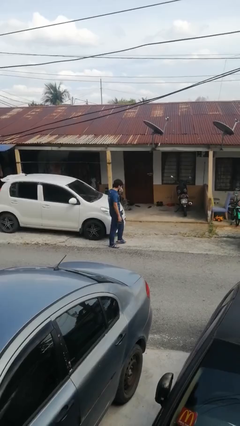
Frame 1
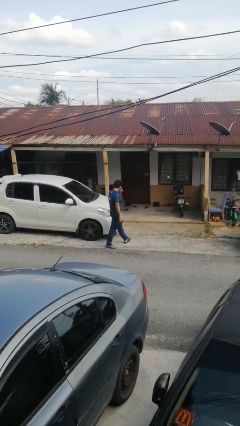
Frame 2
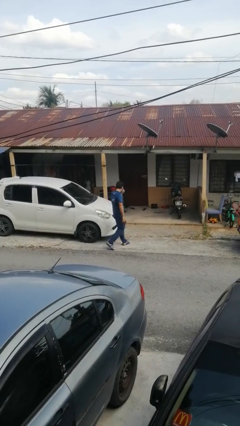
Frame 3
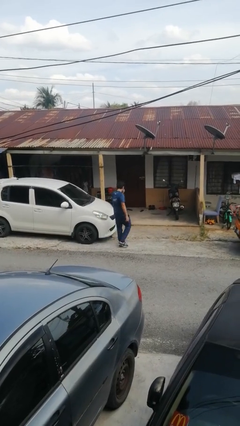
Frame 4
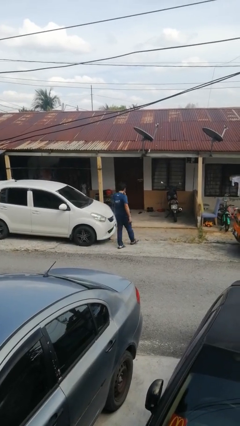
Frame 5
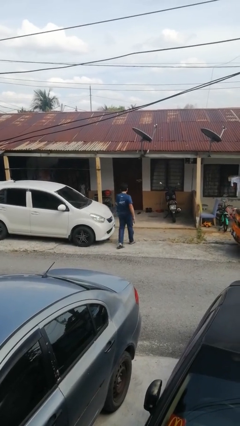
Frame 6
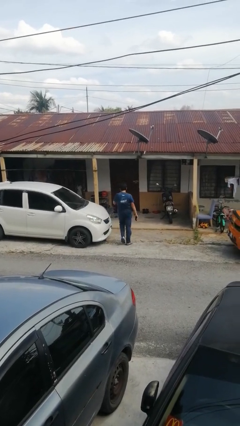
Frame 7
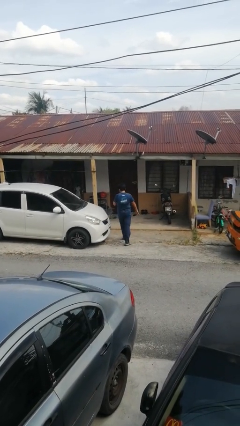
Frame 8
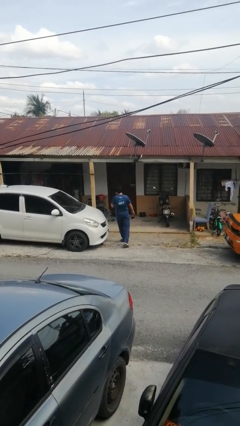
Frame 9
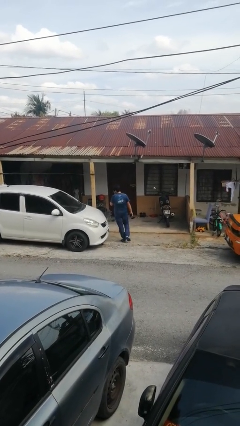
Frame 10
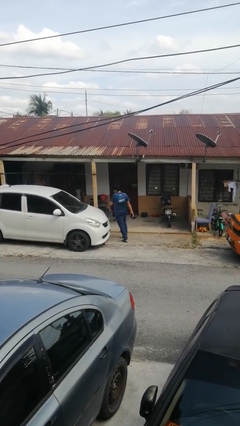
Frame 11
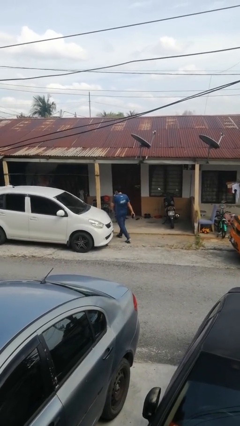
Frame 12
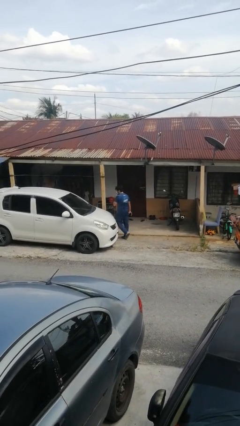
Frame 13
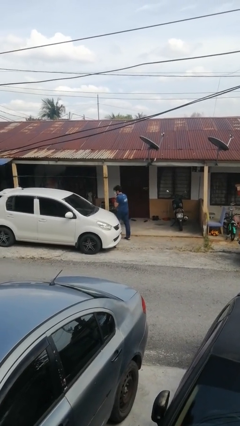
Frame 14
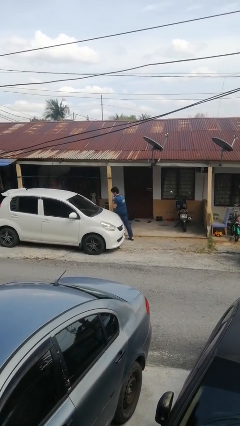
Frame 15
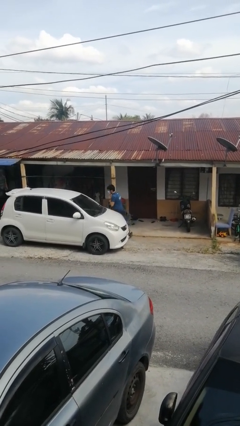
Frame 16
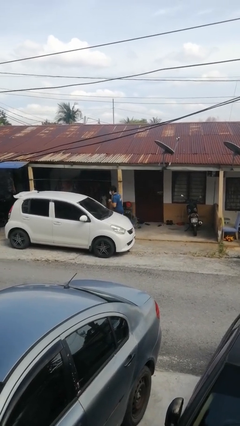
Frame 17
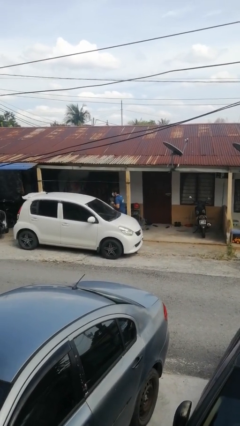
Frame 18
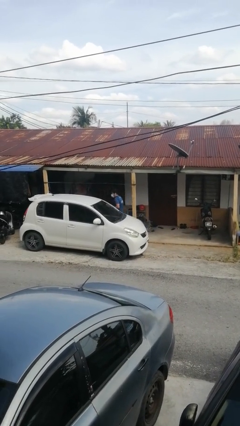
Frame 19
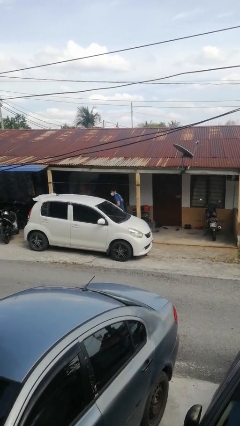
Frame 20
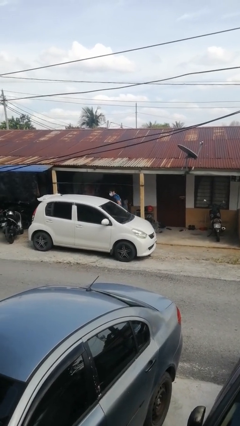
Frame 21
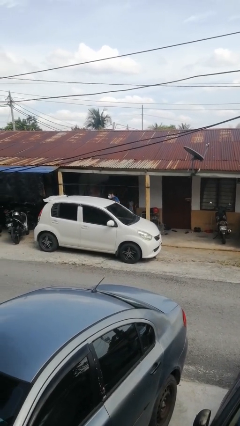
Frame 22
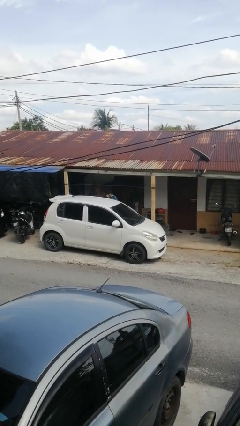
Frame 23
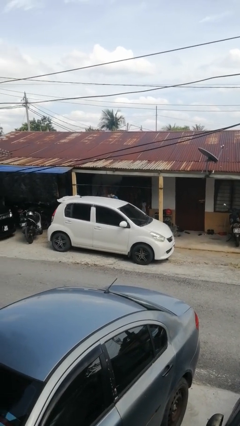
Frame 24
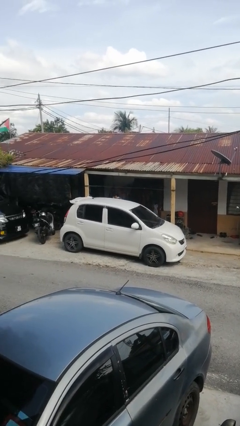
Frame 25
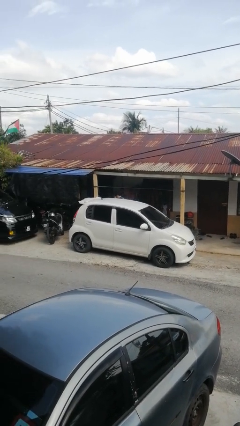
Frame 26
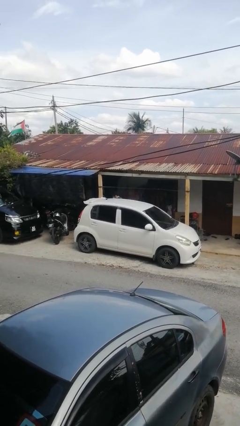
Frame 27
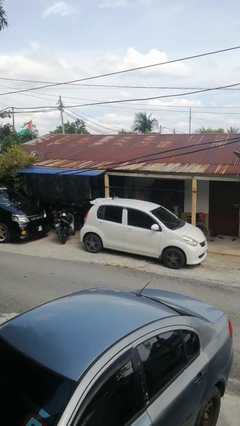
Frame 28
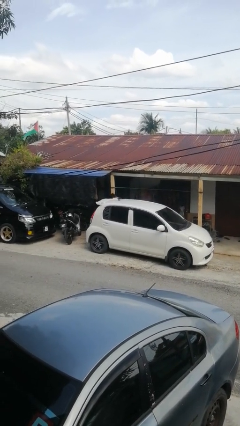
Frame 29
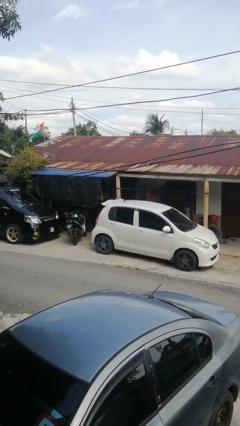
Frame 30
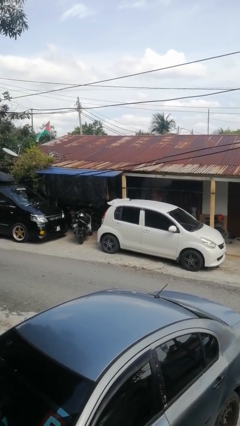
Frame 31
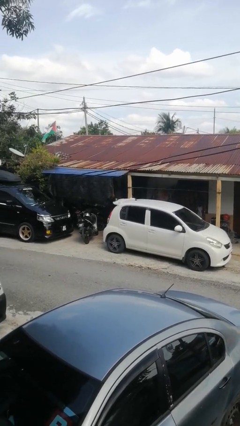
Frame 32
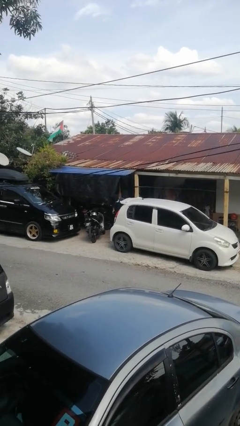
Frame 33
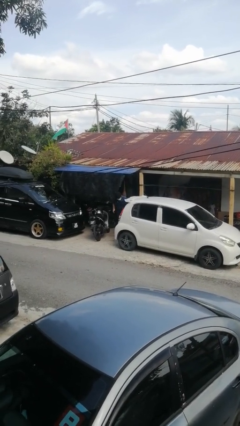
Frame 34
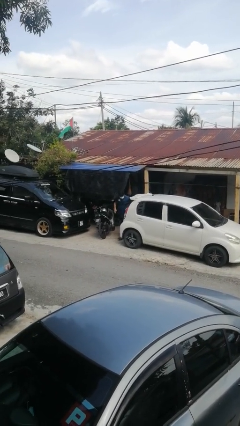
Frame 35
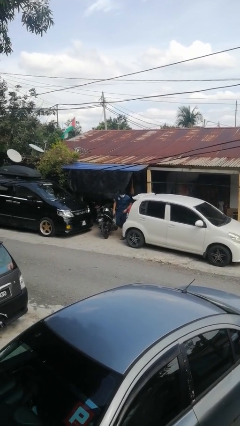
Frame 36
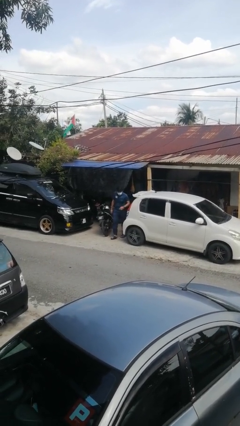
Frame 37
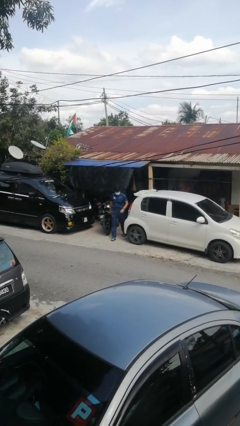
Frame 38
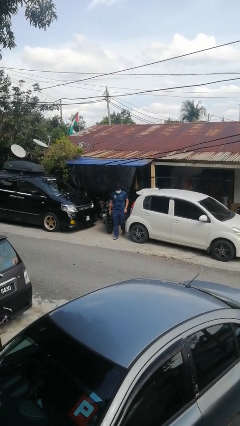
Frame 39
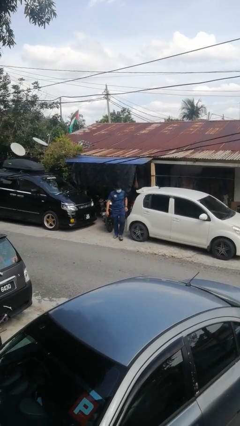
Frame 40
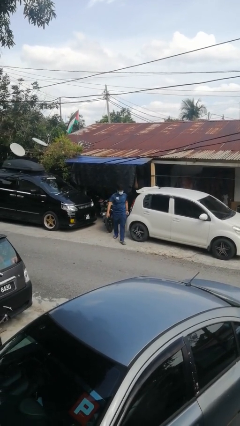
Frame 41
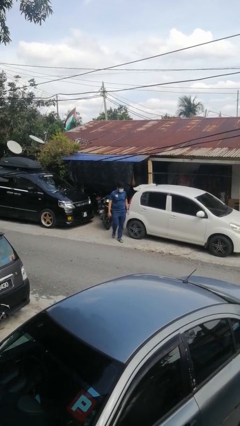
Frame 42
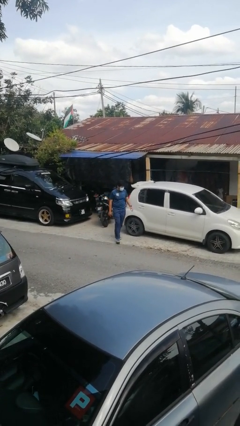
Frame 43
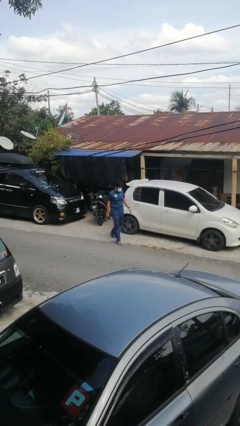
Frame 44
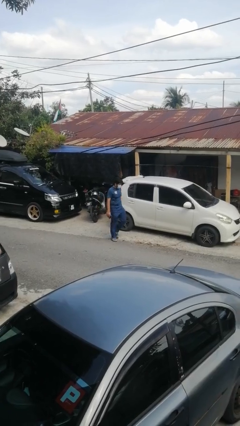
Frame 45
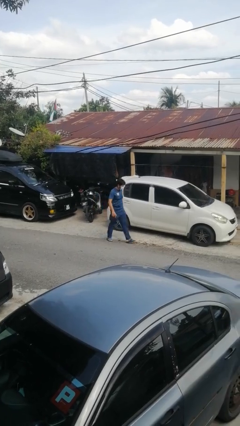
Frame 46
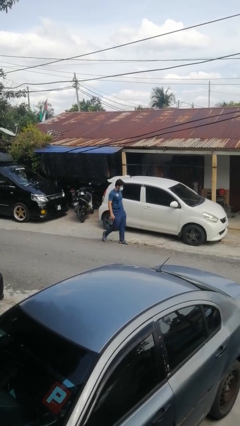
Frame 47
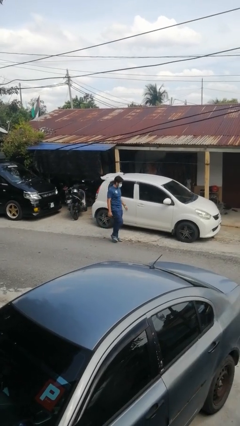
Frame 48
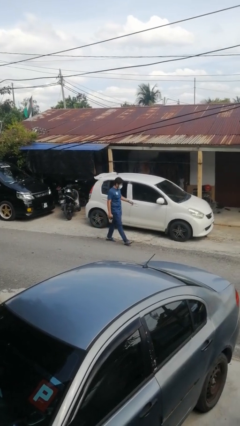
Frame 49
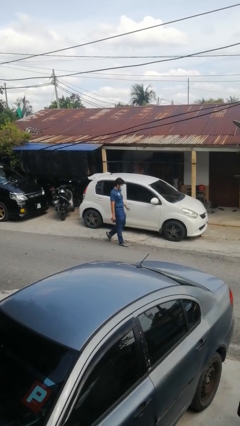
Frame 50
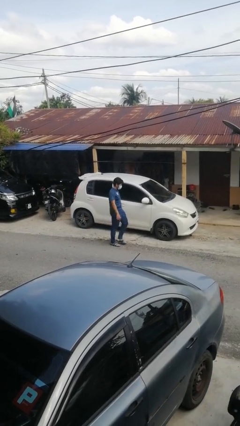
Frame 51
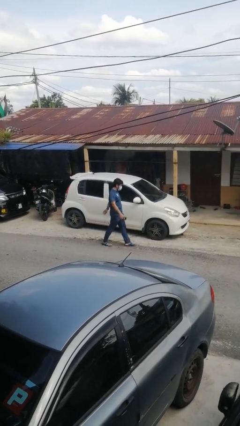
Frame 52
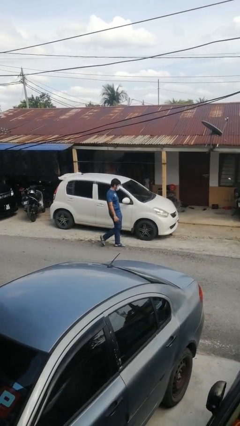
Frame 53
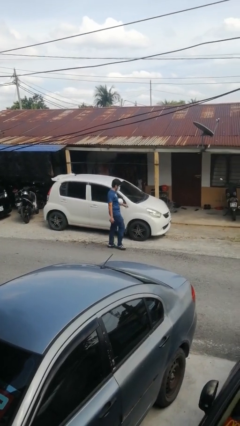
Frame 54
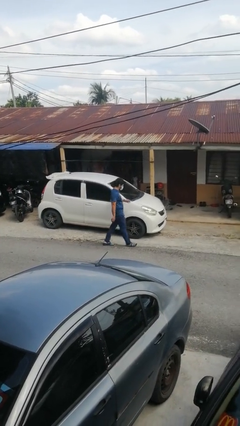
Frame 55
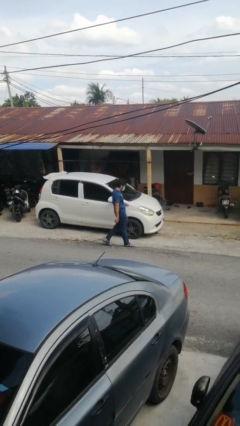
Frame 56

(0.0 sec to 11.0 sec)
person walks around car

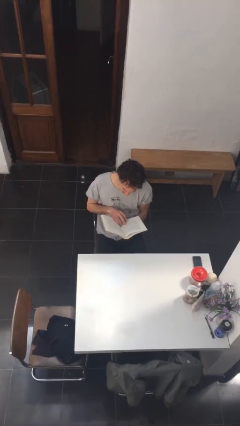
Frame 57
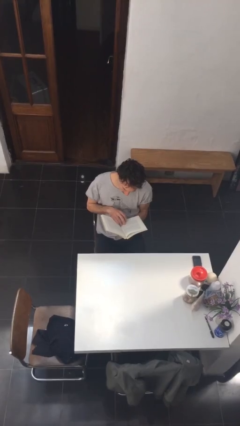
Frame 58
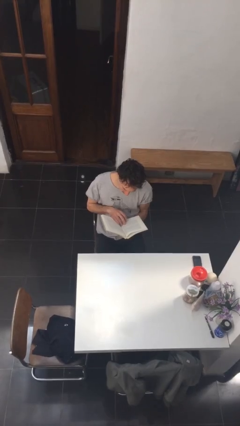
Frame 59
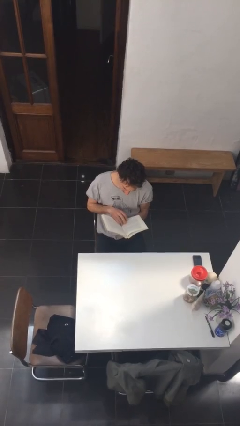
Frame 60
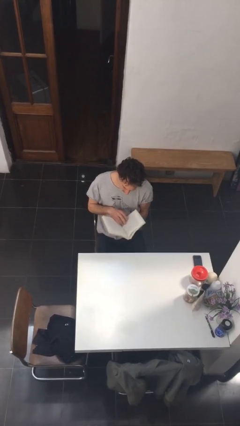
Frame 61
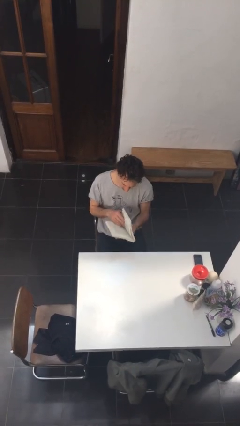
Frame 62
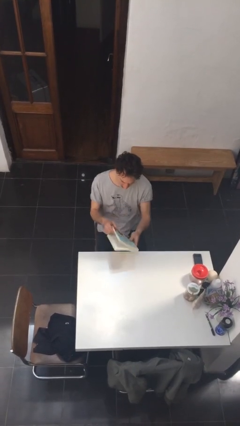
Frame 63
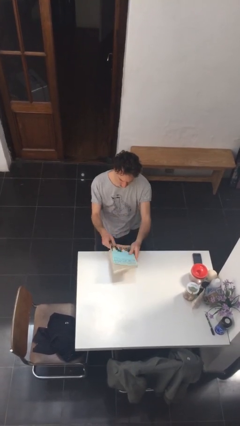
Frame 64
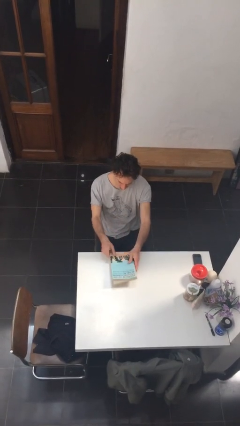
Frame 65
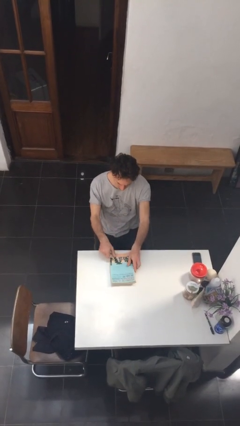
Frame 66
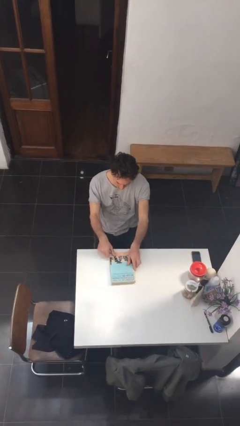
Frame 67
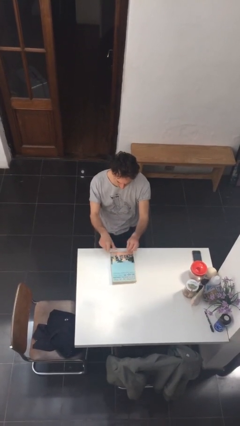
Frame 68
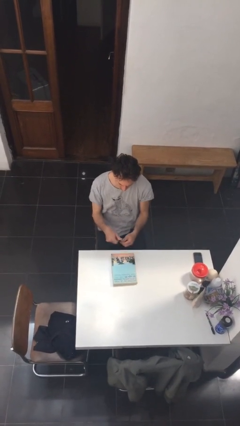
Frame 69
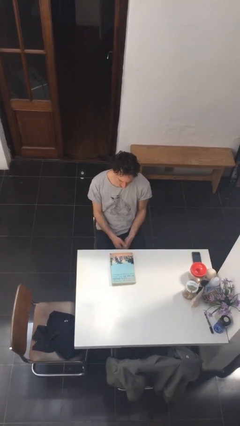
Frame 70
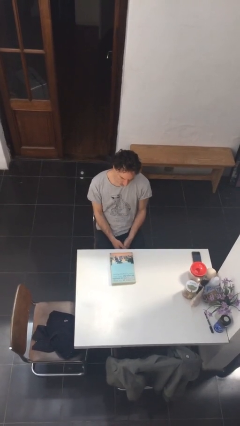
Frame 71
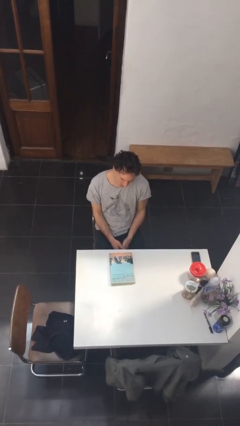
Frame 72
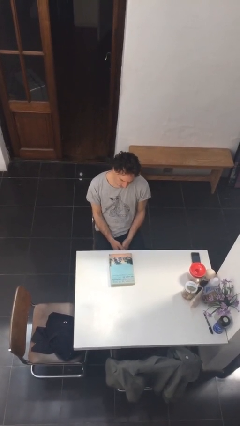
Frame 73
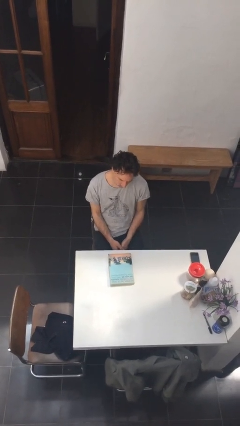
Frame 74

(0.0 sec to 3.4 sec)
person puts down object on table

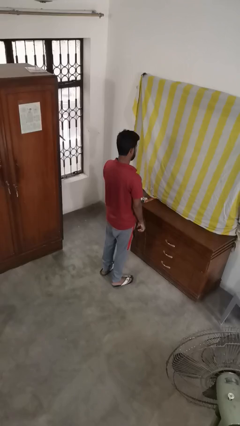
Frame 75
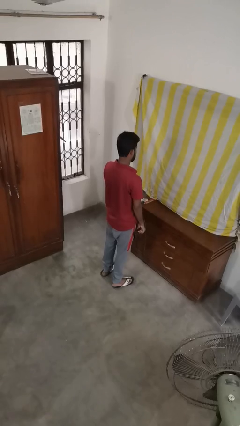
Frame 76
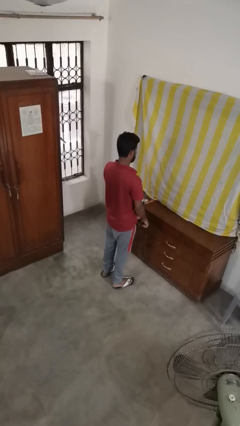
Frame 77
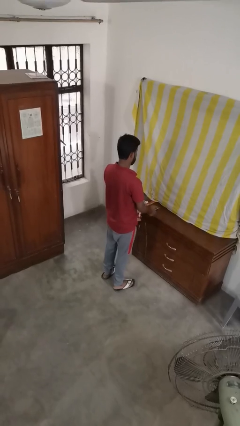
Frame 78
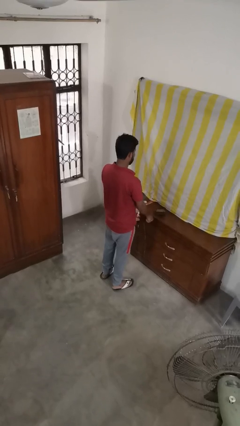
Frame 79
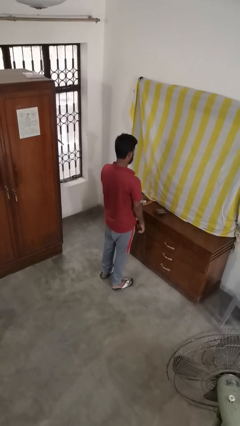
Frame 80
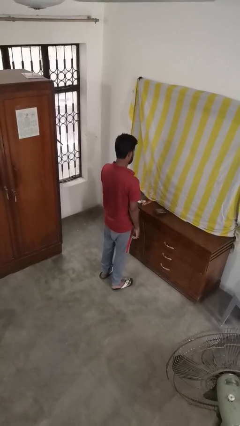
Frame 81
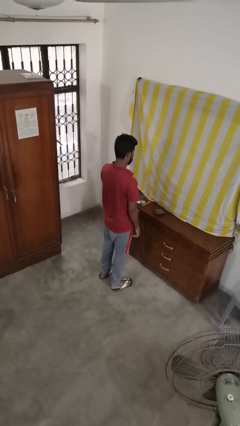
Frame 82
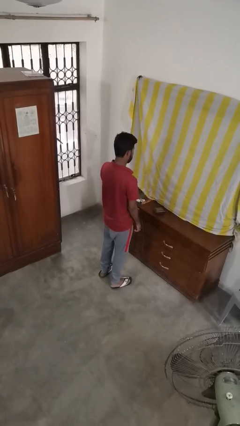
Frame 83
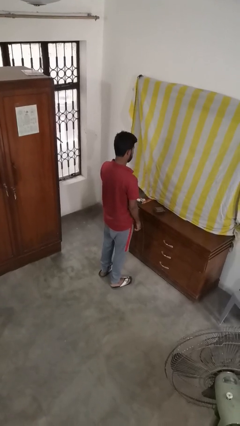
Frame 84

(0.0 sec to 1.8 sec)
person throws object on table

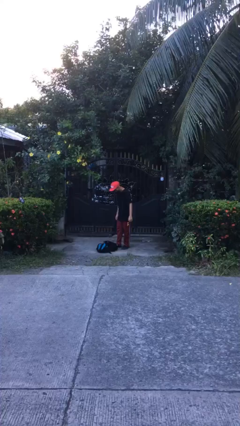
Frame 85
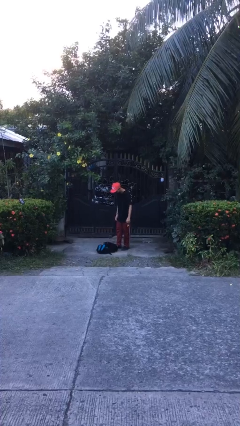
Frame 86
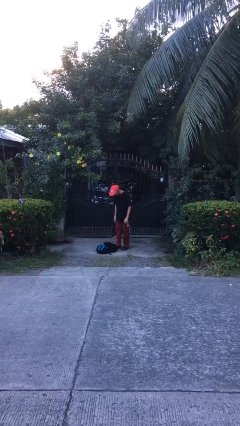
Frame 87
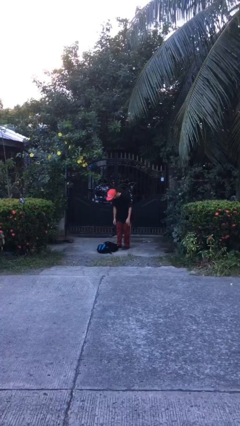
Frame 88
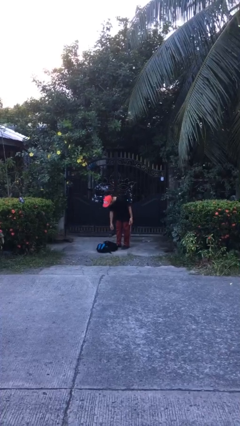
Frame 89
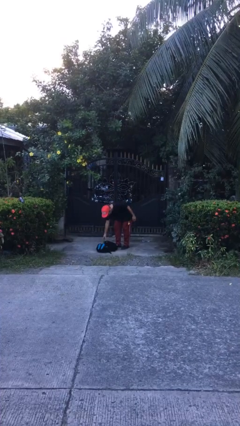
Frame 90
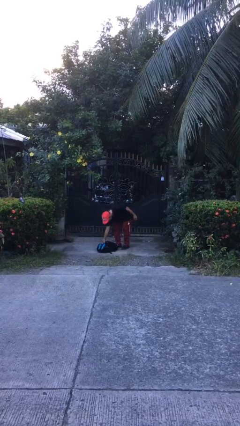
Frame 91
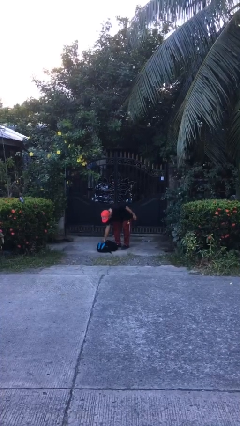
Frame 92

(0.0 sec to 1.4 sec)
person drops object
